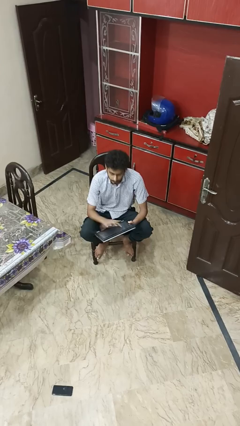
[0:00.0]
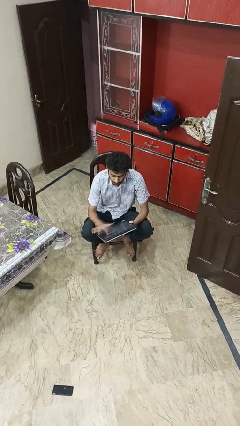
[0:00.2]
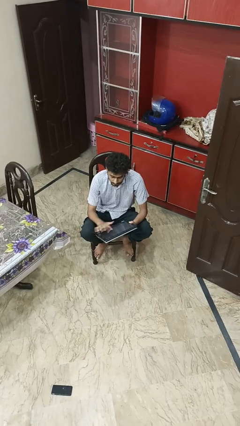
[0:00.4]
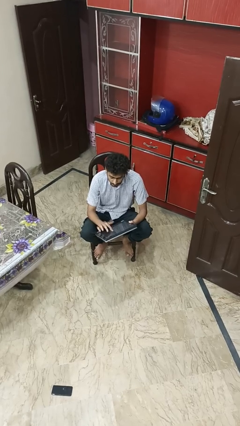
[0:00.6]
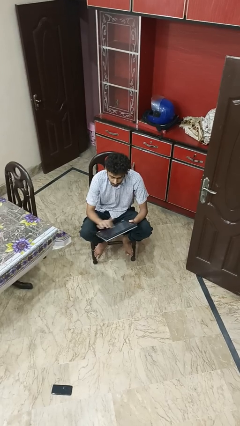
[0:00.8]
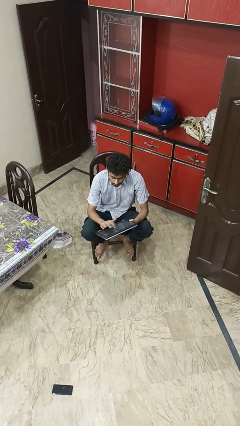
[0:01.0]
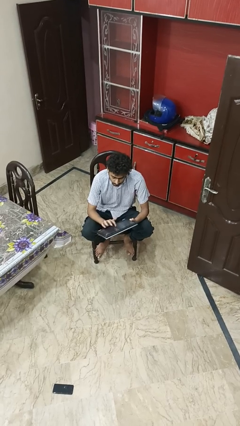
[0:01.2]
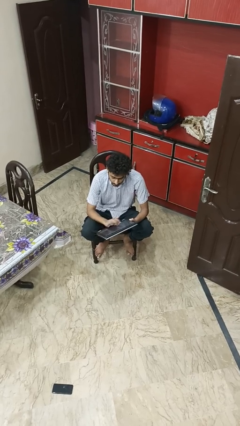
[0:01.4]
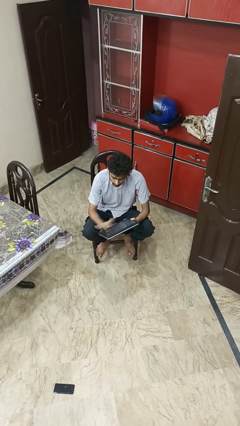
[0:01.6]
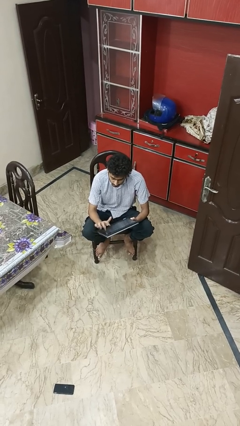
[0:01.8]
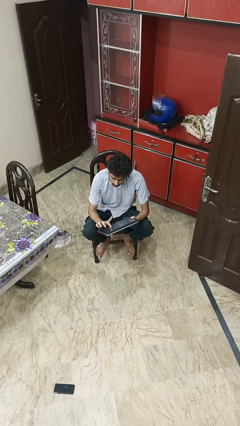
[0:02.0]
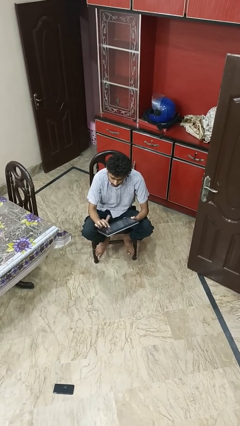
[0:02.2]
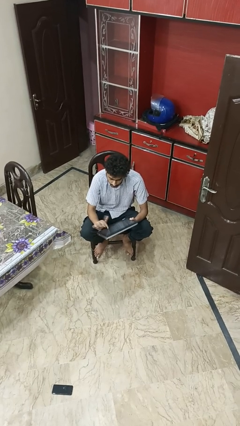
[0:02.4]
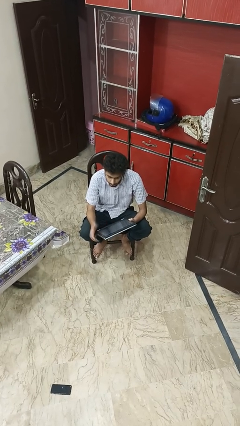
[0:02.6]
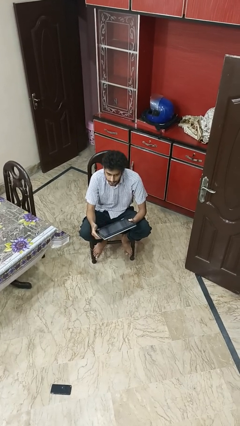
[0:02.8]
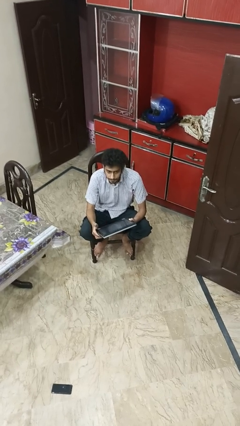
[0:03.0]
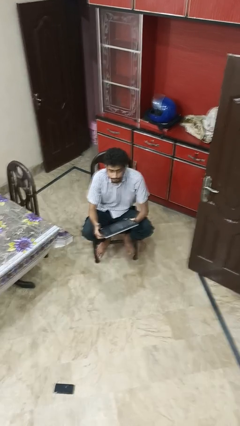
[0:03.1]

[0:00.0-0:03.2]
person interacts with tablet

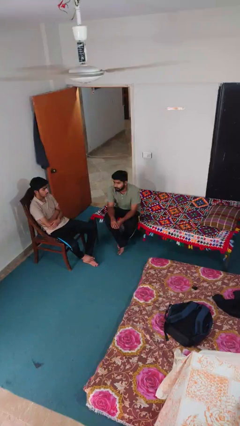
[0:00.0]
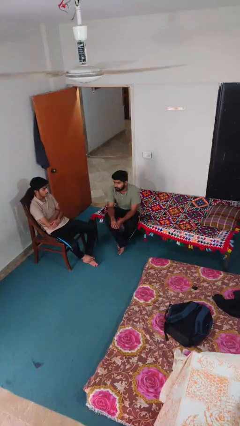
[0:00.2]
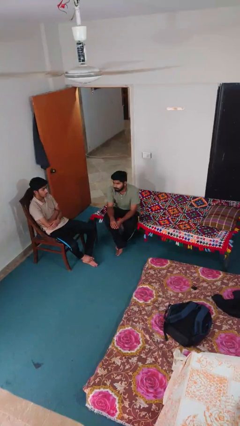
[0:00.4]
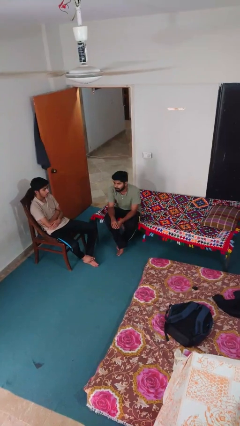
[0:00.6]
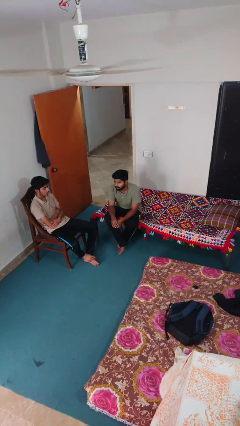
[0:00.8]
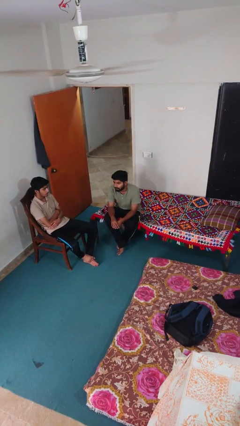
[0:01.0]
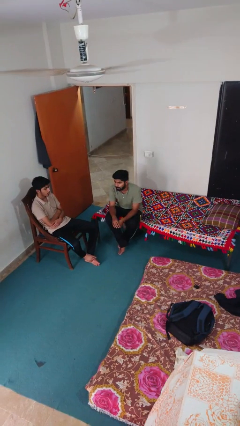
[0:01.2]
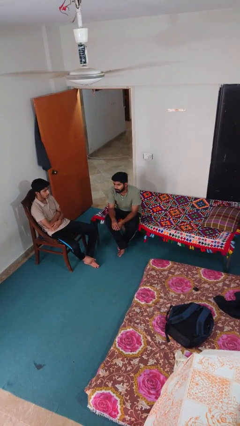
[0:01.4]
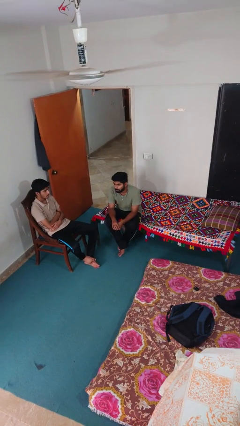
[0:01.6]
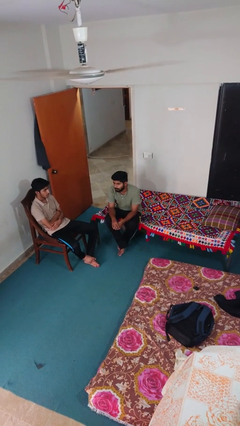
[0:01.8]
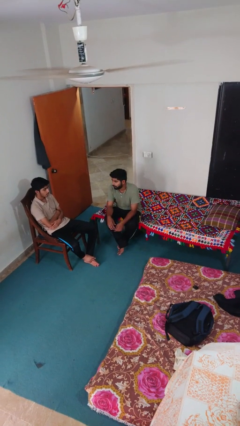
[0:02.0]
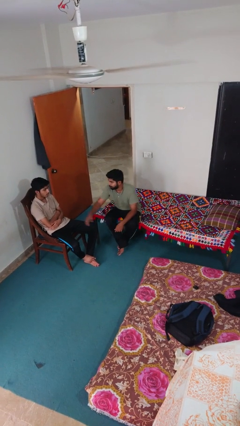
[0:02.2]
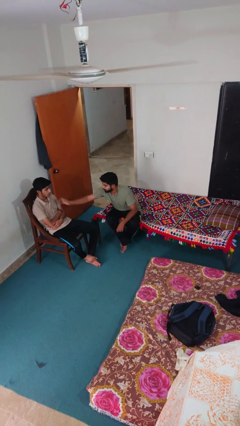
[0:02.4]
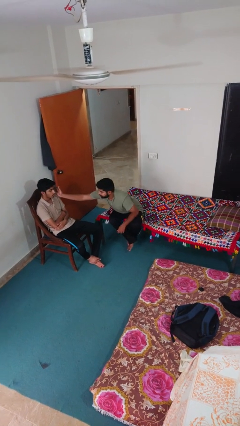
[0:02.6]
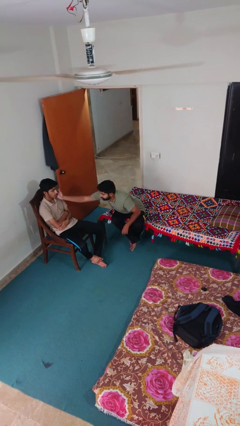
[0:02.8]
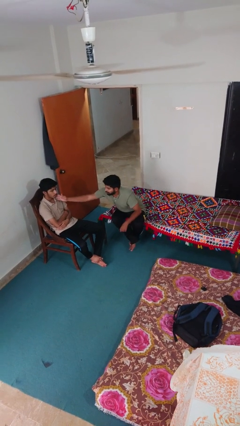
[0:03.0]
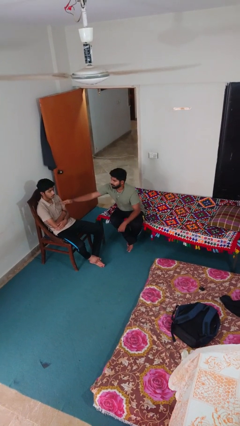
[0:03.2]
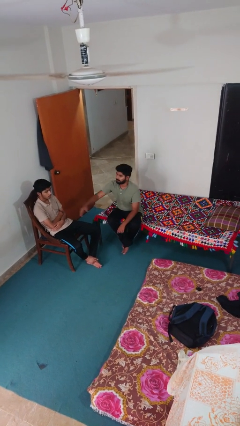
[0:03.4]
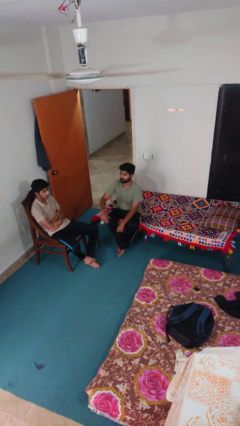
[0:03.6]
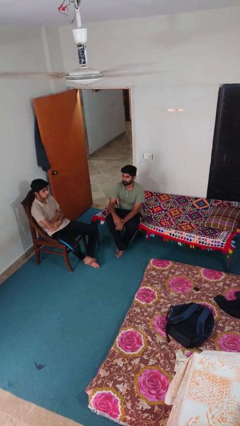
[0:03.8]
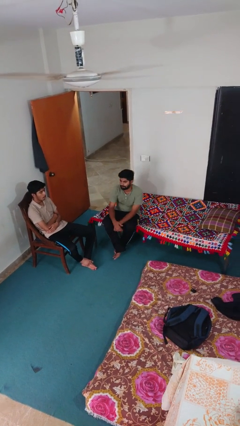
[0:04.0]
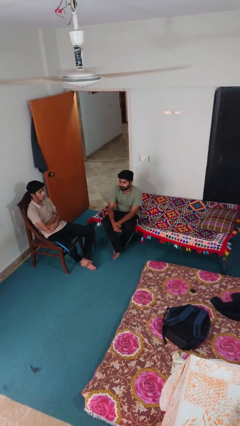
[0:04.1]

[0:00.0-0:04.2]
person touches face of person

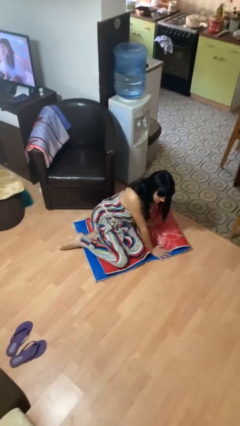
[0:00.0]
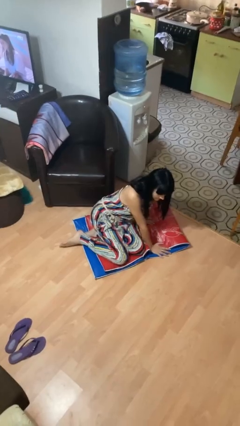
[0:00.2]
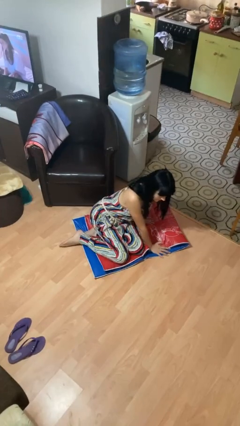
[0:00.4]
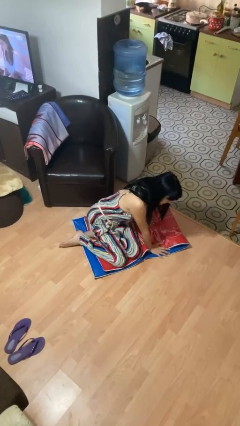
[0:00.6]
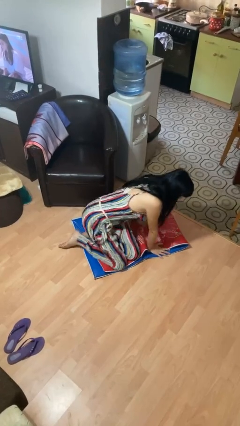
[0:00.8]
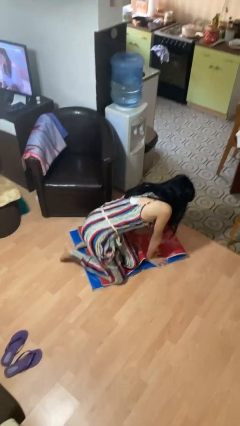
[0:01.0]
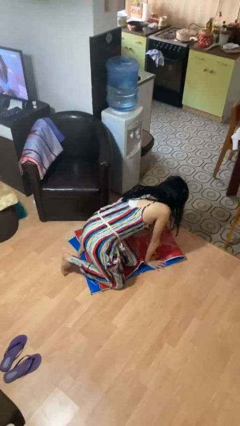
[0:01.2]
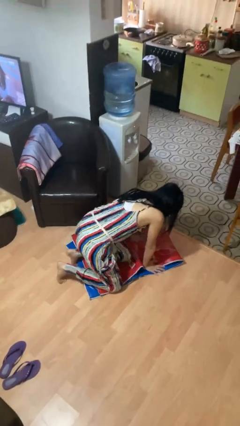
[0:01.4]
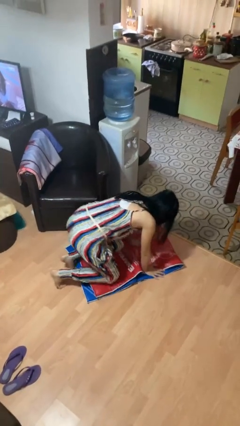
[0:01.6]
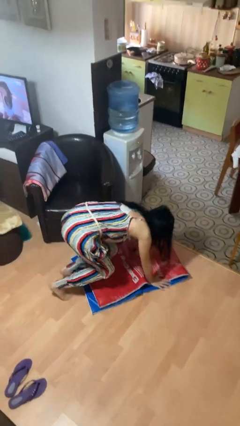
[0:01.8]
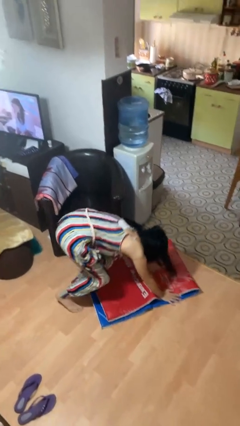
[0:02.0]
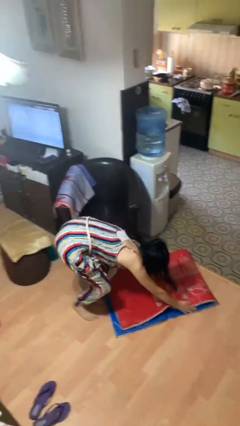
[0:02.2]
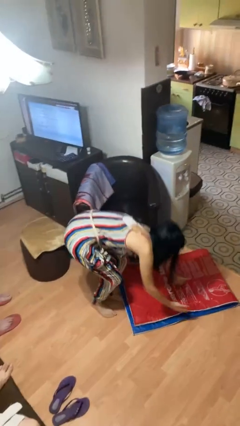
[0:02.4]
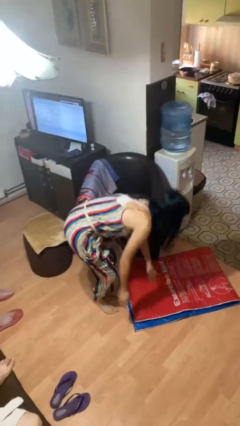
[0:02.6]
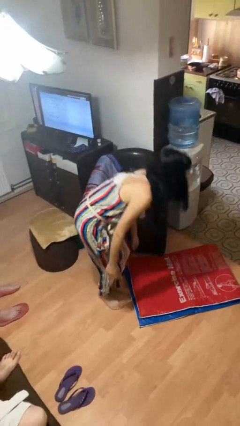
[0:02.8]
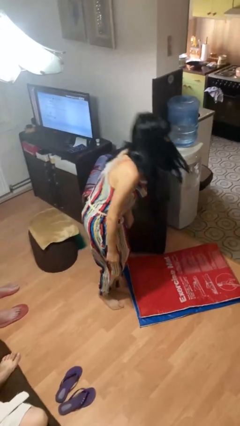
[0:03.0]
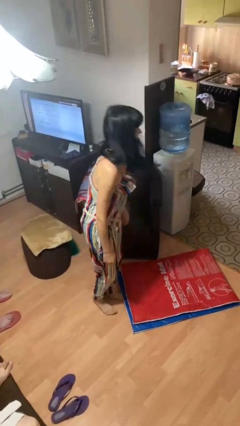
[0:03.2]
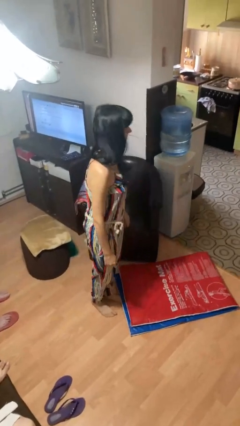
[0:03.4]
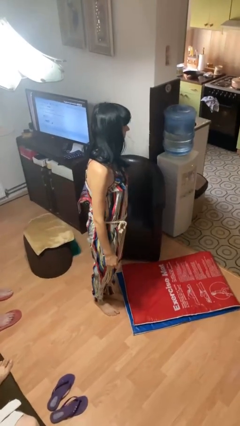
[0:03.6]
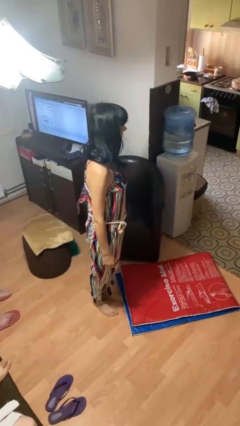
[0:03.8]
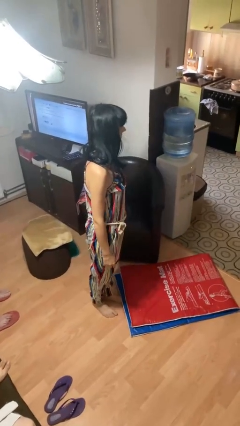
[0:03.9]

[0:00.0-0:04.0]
person stands up from floor

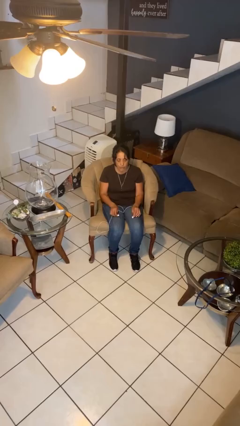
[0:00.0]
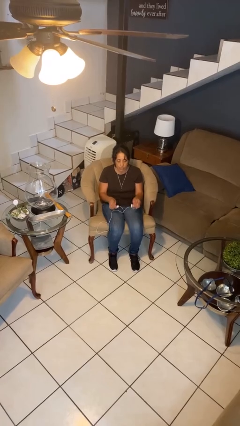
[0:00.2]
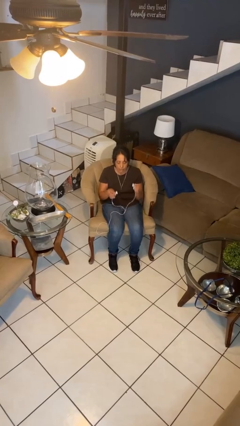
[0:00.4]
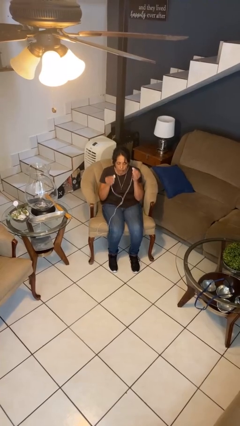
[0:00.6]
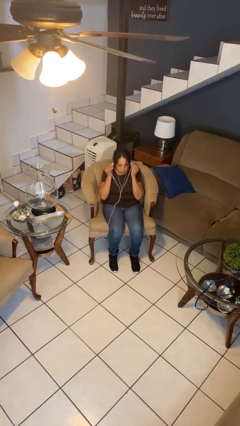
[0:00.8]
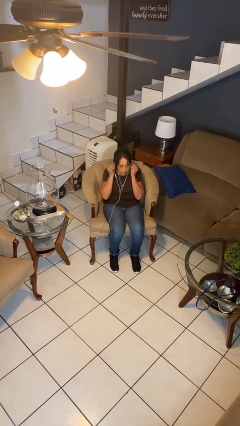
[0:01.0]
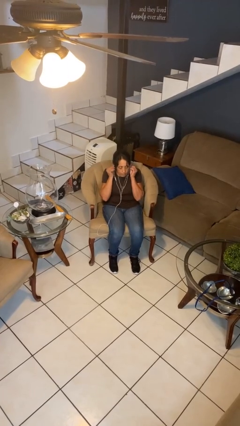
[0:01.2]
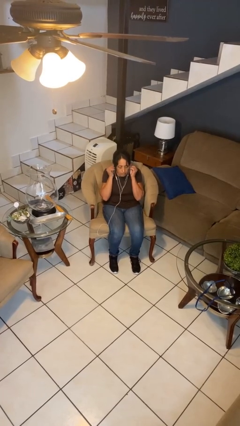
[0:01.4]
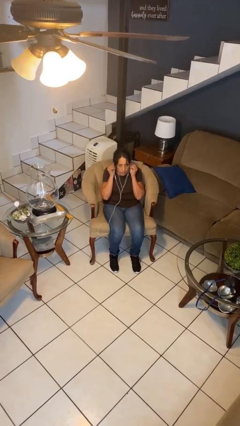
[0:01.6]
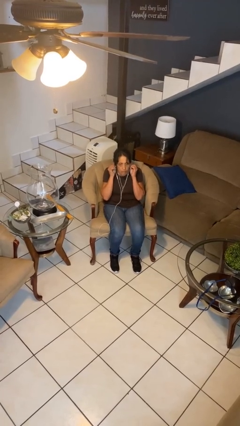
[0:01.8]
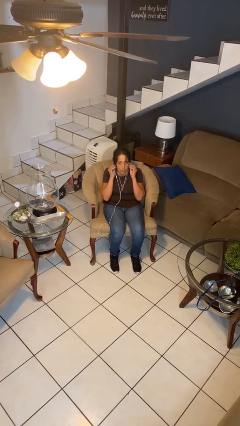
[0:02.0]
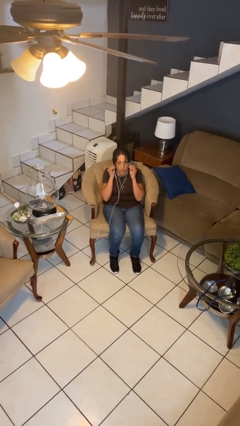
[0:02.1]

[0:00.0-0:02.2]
person puts on headphones

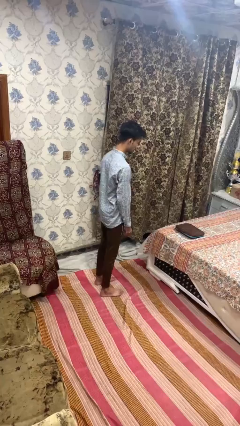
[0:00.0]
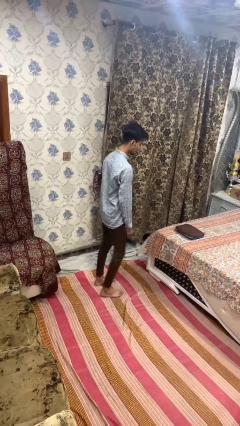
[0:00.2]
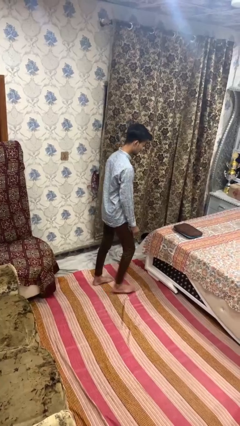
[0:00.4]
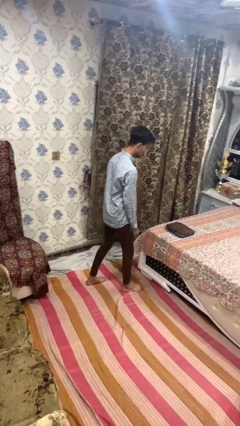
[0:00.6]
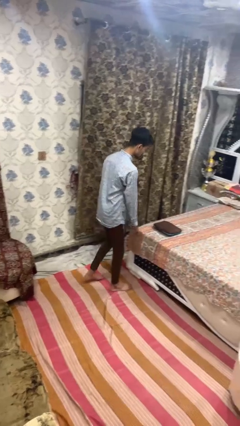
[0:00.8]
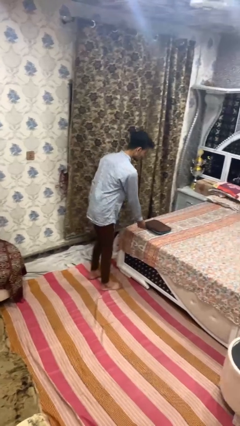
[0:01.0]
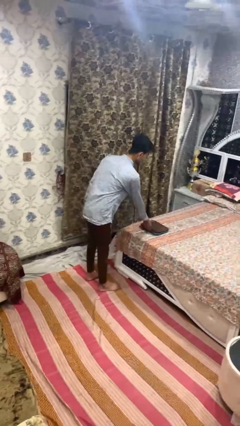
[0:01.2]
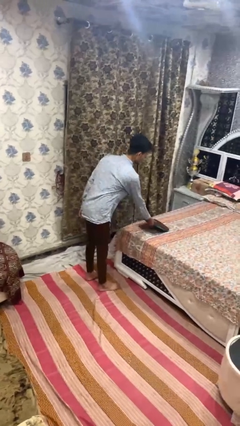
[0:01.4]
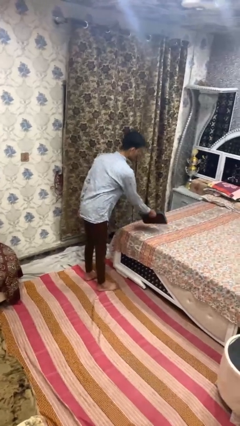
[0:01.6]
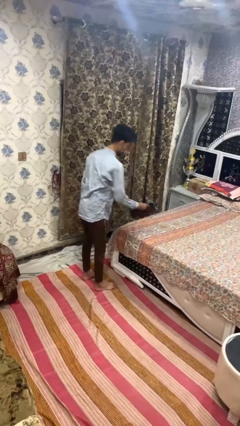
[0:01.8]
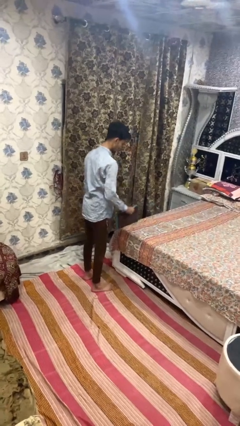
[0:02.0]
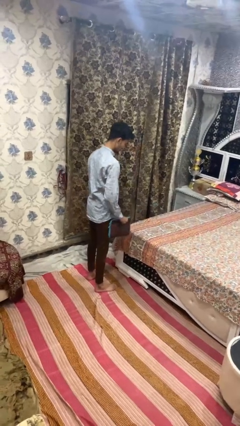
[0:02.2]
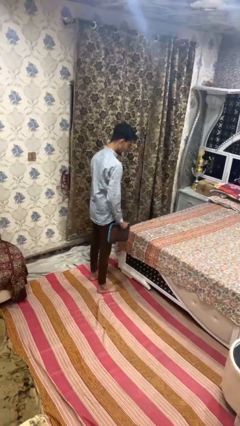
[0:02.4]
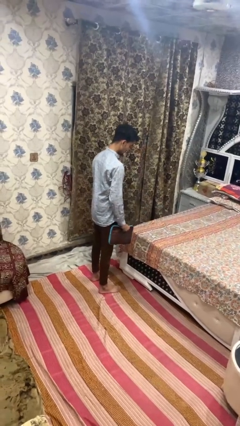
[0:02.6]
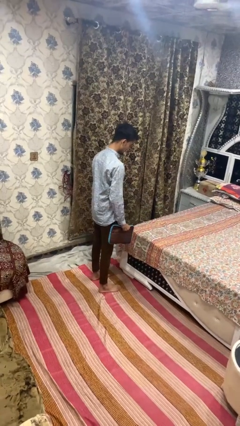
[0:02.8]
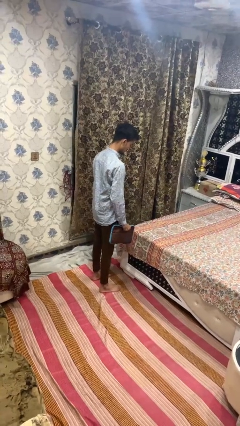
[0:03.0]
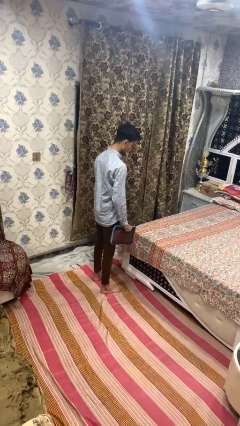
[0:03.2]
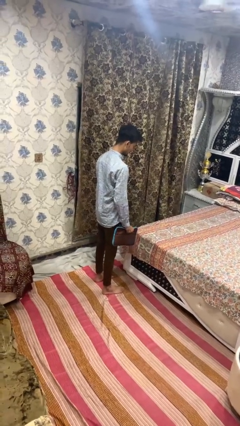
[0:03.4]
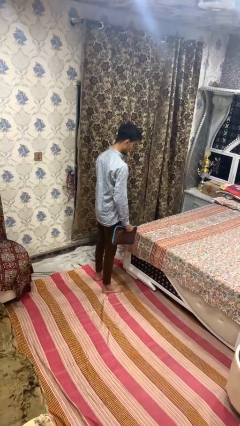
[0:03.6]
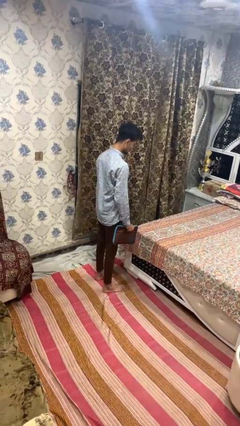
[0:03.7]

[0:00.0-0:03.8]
person picks up object from bed

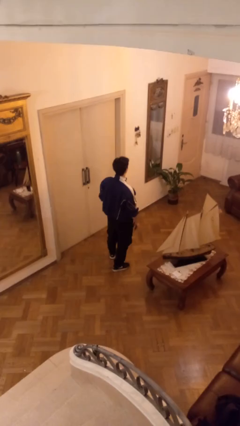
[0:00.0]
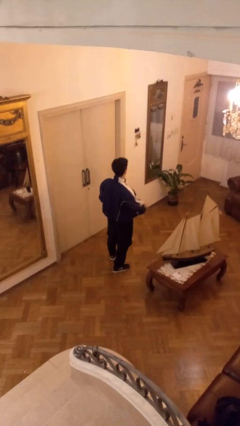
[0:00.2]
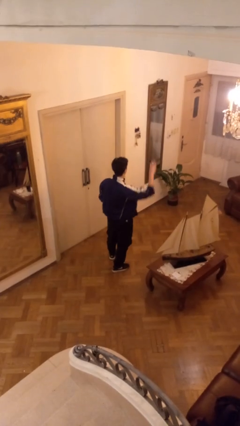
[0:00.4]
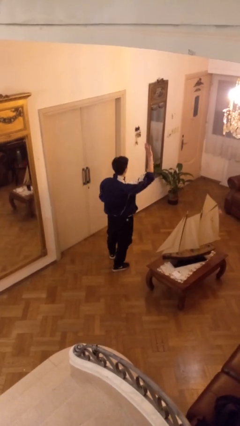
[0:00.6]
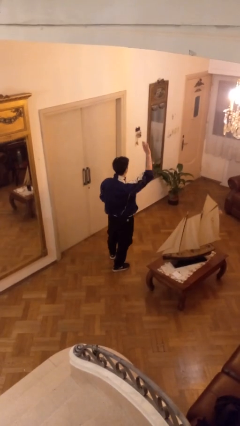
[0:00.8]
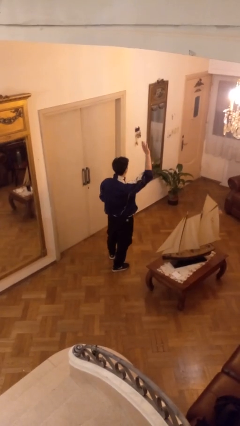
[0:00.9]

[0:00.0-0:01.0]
person gestures raise hand
